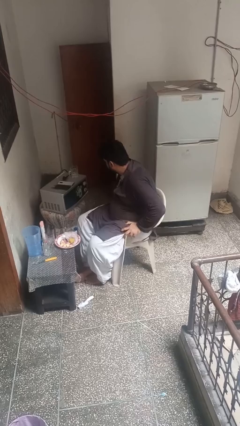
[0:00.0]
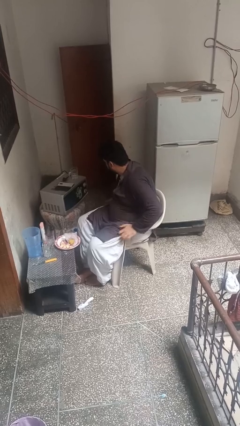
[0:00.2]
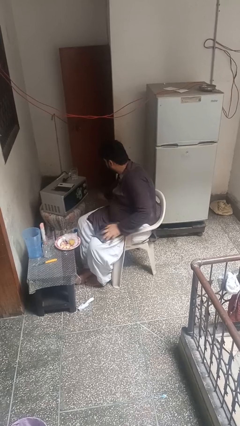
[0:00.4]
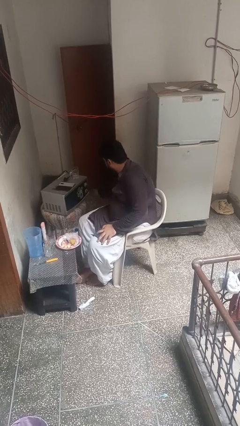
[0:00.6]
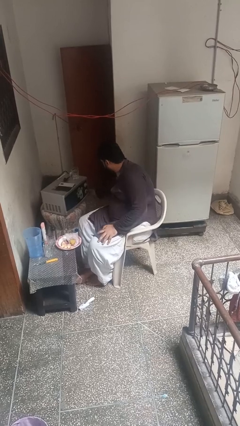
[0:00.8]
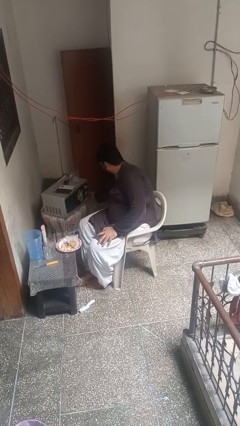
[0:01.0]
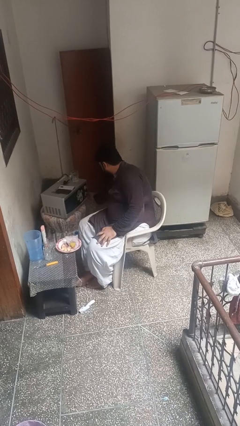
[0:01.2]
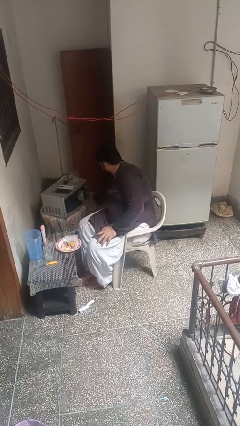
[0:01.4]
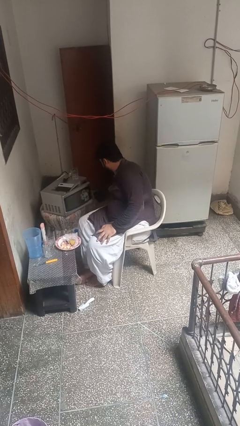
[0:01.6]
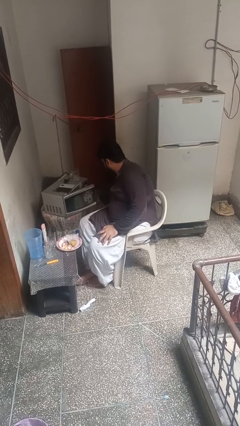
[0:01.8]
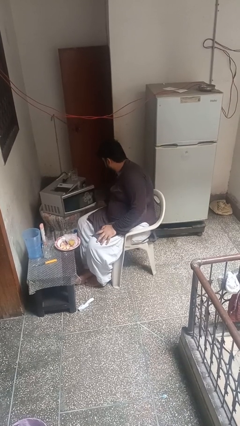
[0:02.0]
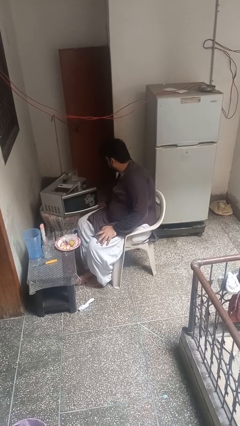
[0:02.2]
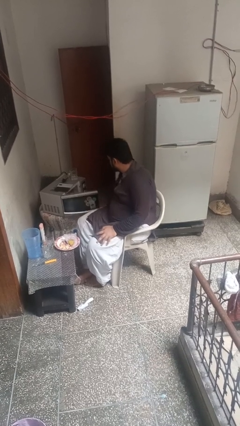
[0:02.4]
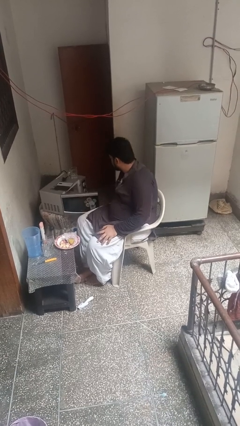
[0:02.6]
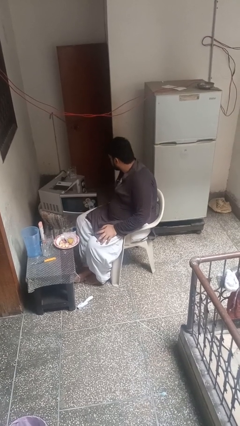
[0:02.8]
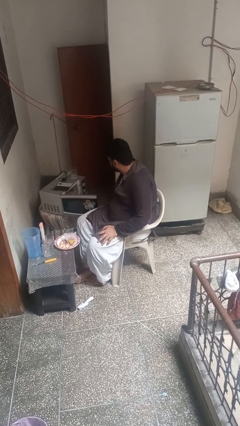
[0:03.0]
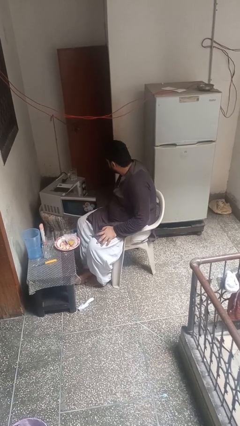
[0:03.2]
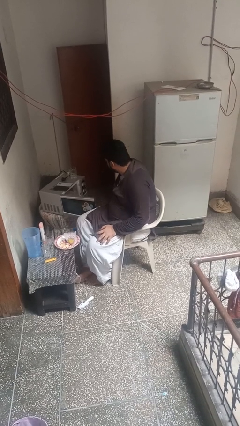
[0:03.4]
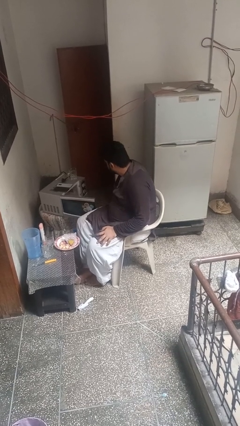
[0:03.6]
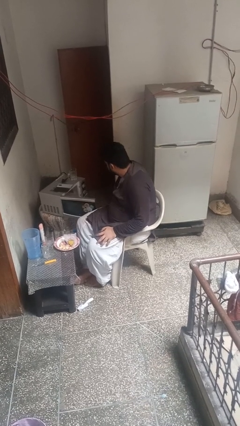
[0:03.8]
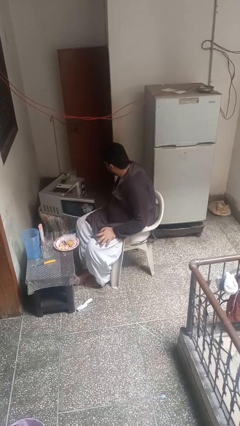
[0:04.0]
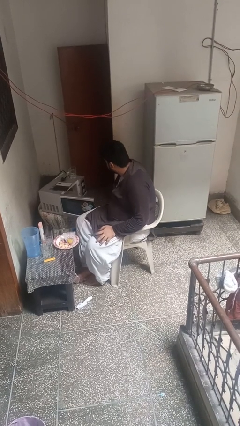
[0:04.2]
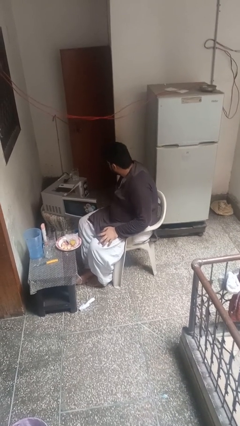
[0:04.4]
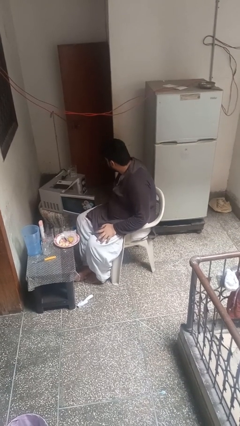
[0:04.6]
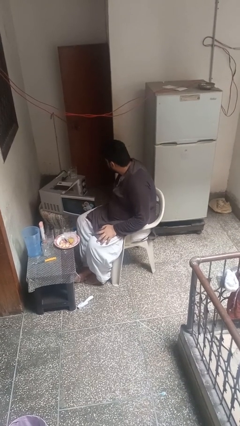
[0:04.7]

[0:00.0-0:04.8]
person opens microwave

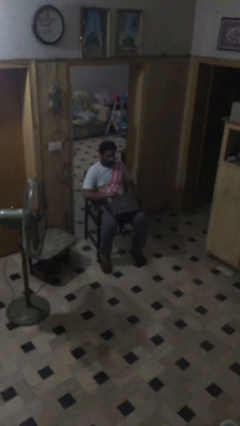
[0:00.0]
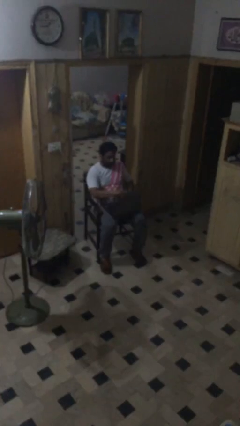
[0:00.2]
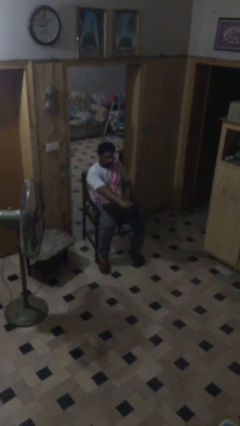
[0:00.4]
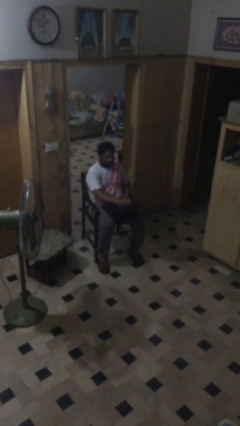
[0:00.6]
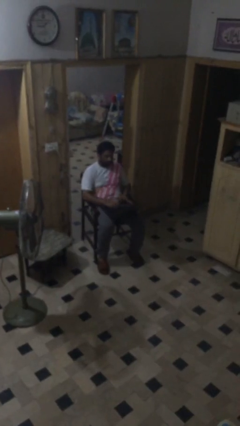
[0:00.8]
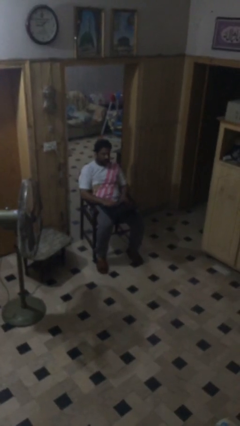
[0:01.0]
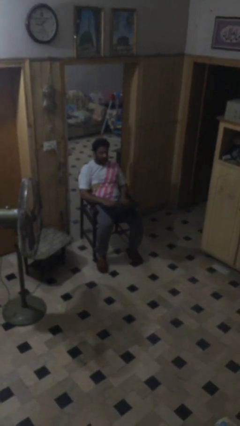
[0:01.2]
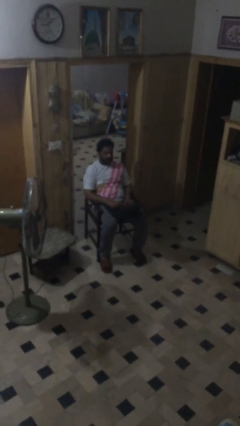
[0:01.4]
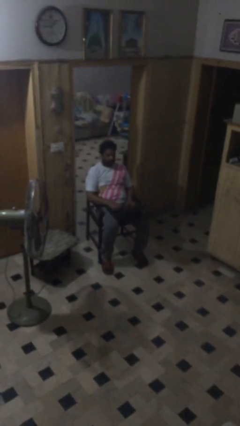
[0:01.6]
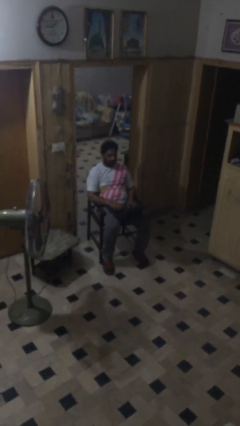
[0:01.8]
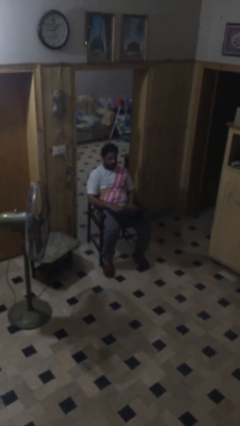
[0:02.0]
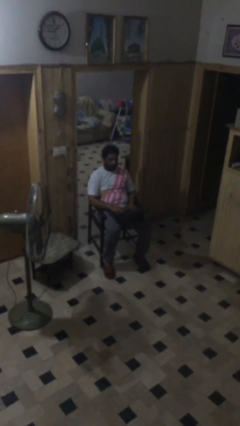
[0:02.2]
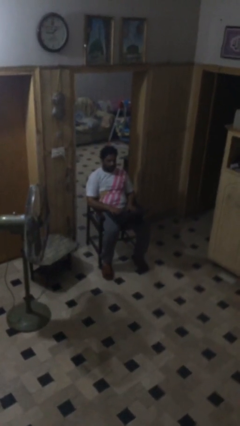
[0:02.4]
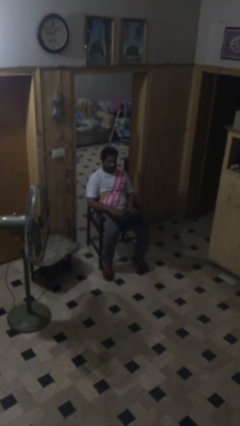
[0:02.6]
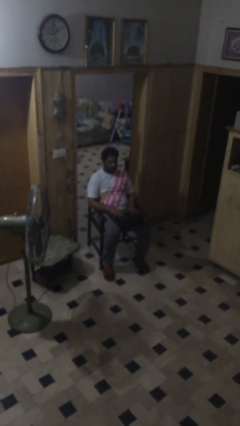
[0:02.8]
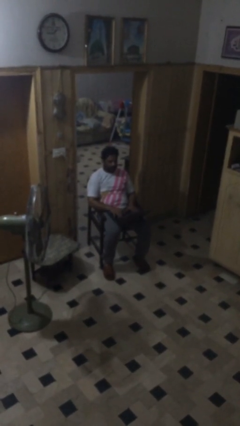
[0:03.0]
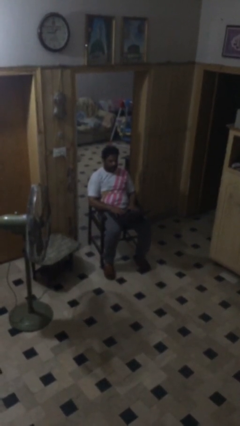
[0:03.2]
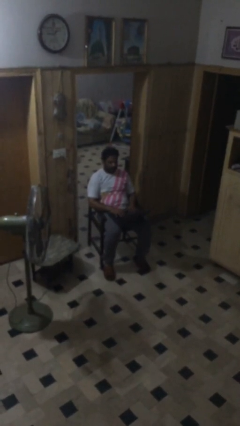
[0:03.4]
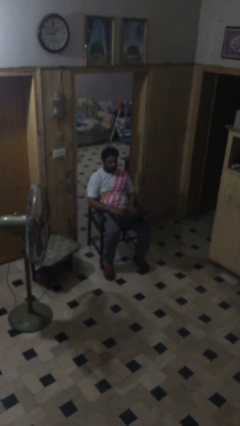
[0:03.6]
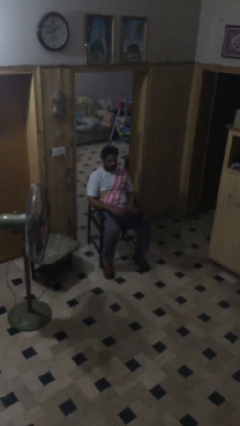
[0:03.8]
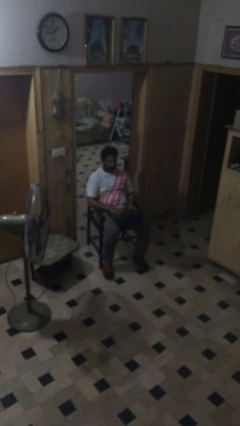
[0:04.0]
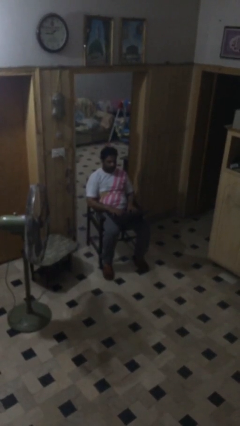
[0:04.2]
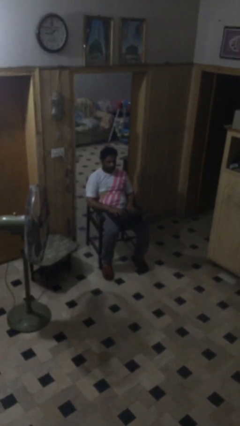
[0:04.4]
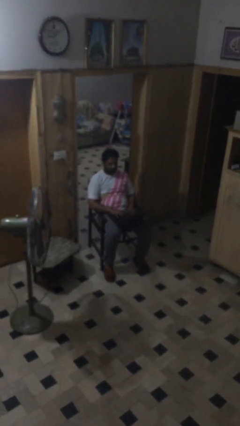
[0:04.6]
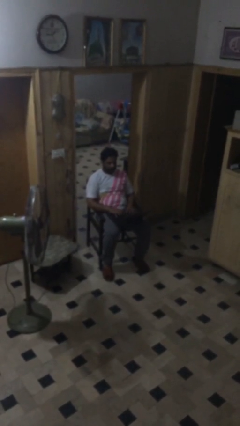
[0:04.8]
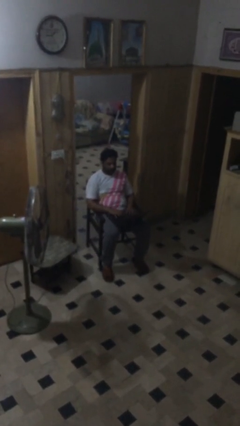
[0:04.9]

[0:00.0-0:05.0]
person interacts with laptop

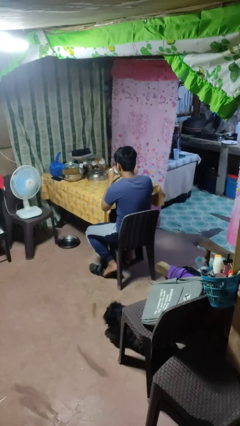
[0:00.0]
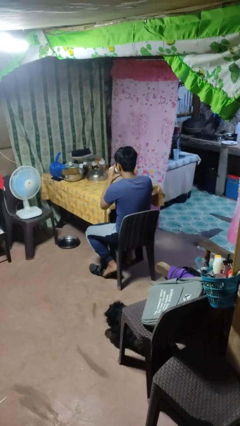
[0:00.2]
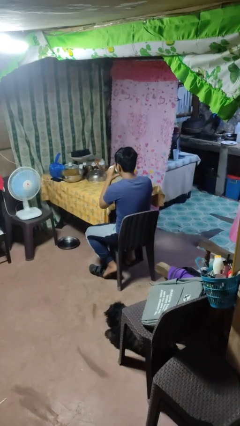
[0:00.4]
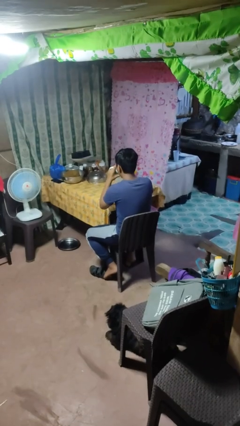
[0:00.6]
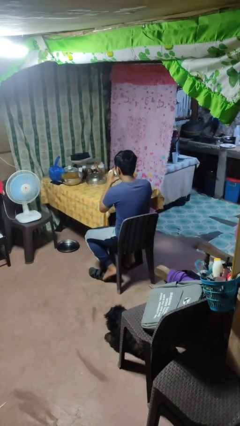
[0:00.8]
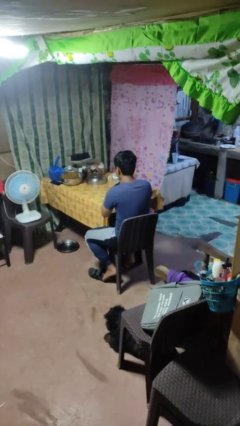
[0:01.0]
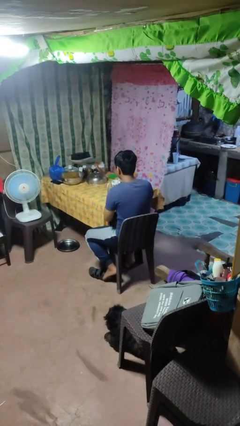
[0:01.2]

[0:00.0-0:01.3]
person drinks from mug

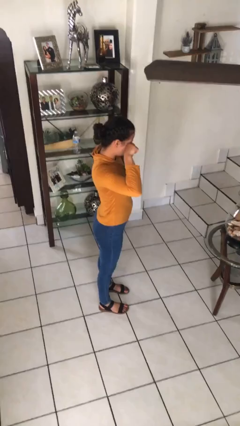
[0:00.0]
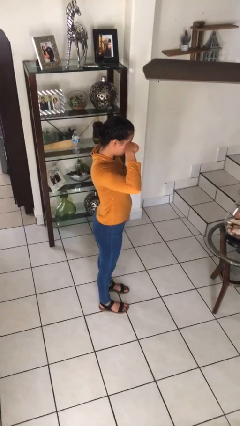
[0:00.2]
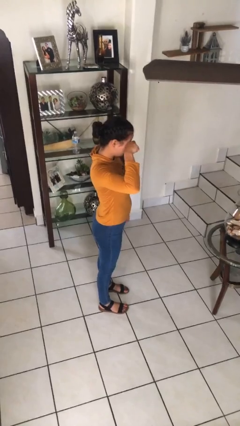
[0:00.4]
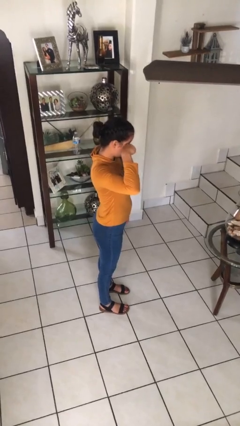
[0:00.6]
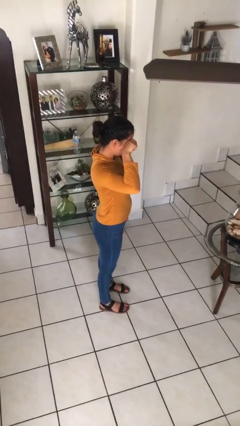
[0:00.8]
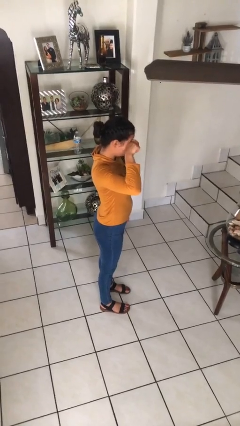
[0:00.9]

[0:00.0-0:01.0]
person rubs eyes

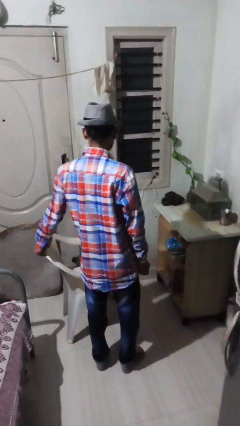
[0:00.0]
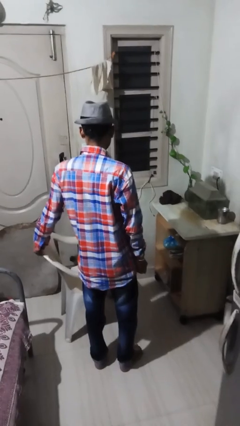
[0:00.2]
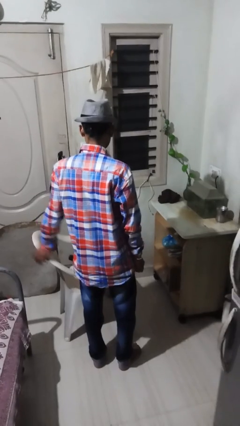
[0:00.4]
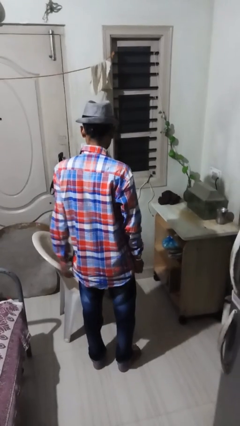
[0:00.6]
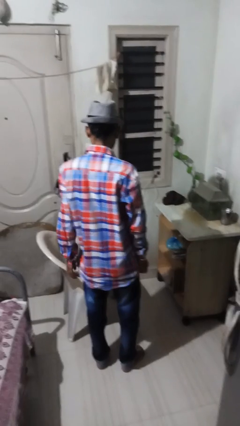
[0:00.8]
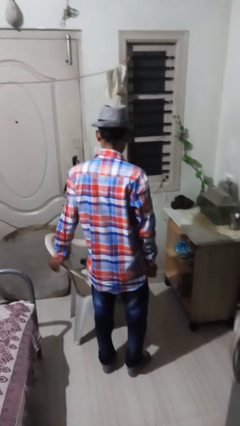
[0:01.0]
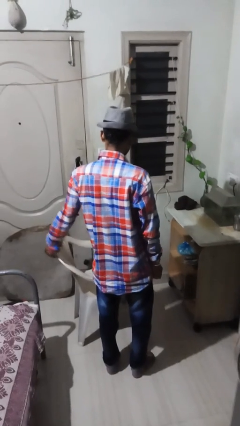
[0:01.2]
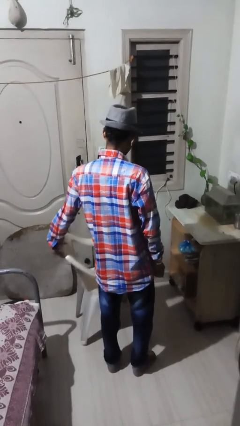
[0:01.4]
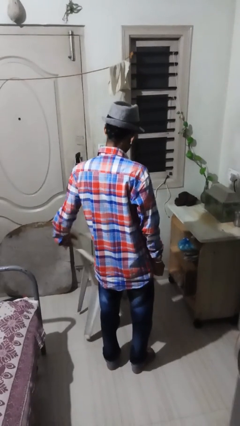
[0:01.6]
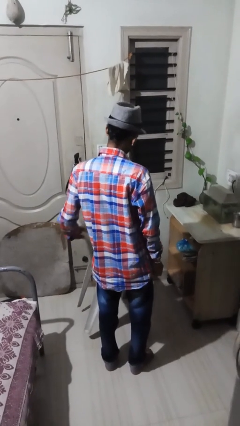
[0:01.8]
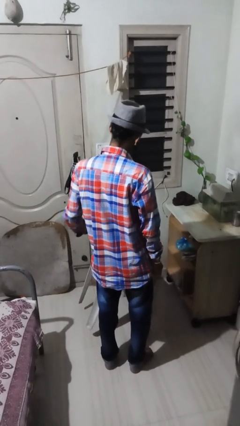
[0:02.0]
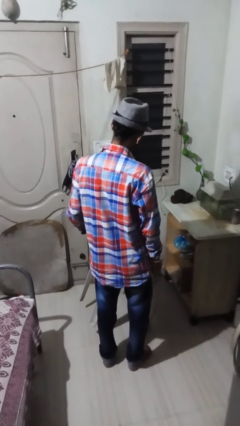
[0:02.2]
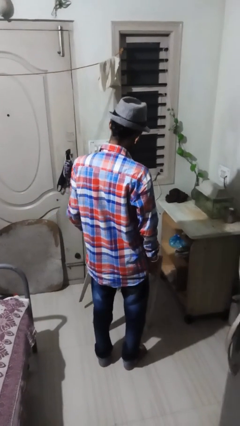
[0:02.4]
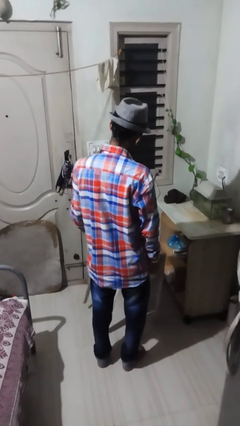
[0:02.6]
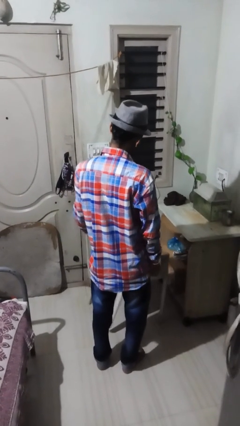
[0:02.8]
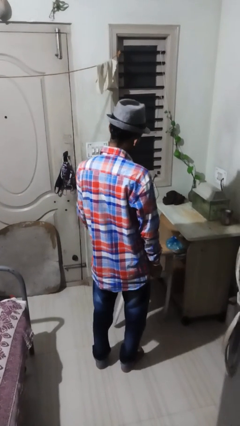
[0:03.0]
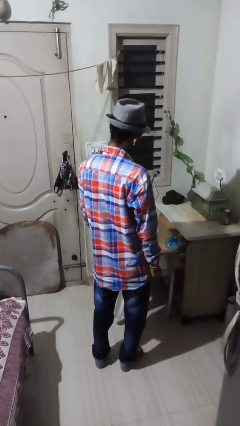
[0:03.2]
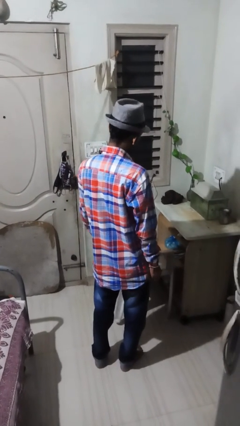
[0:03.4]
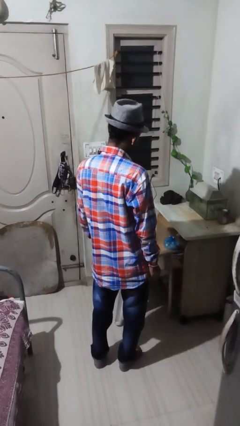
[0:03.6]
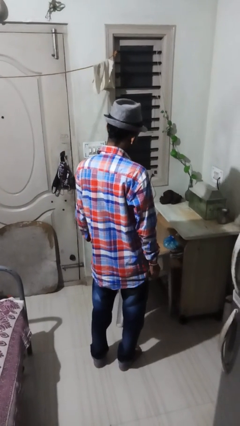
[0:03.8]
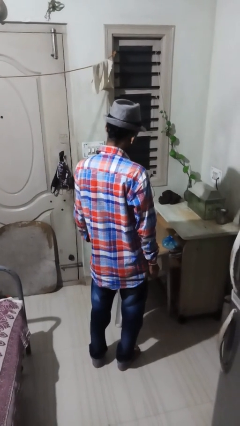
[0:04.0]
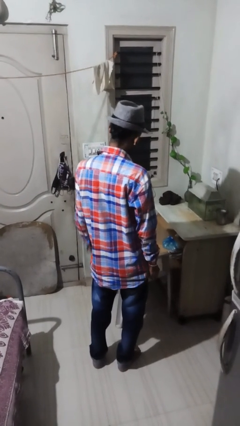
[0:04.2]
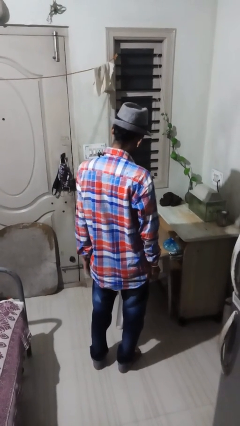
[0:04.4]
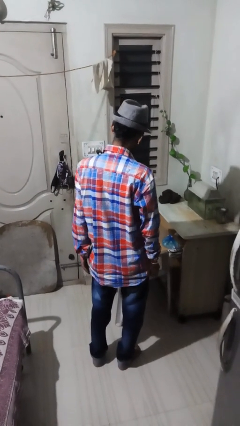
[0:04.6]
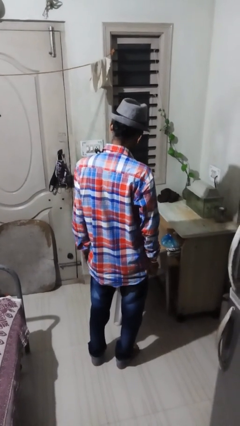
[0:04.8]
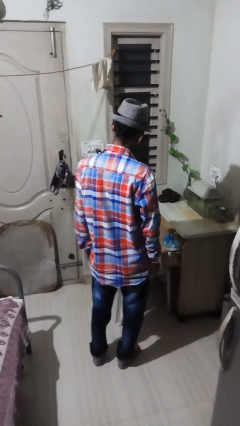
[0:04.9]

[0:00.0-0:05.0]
person pushes in chair

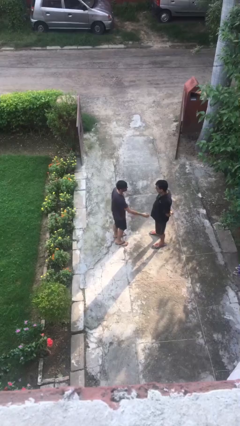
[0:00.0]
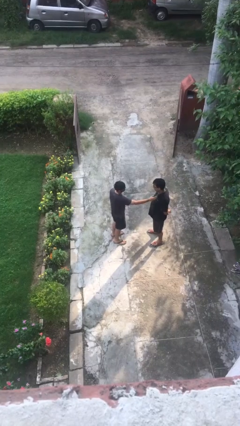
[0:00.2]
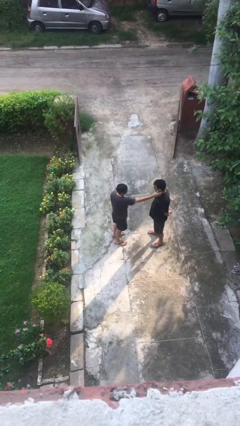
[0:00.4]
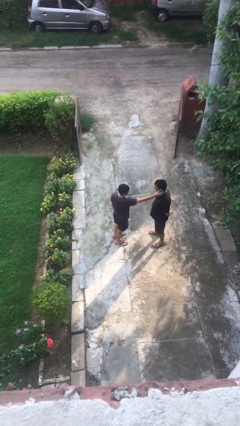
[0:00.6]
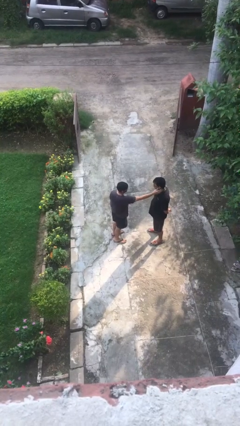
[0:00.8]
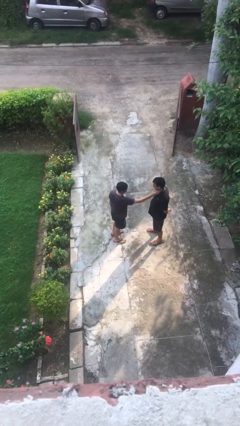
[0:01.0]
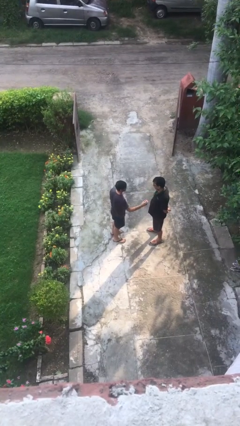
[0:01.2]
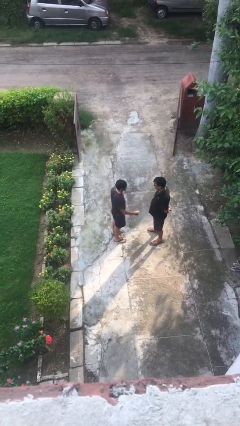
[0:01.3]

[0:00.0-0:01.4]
person touches face of person
